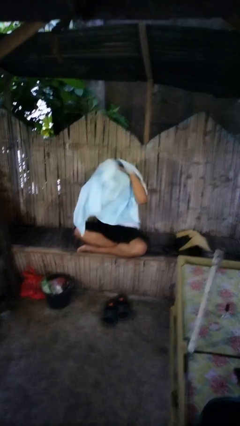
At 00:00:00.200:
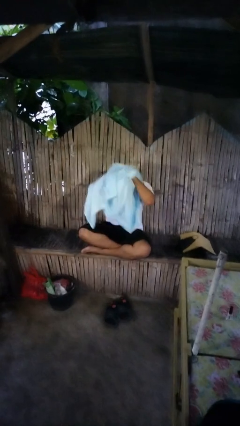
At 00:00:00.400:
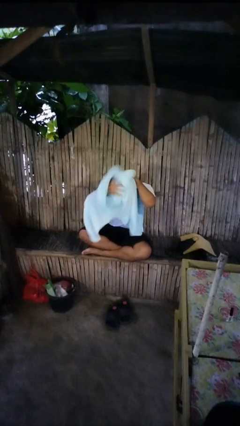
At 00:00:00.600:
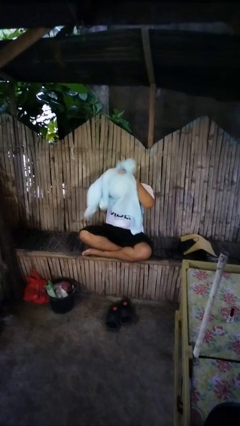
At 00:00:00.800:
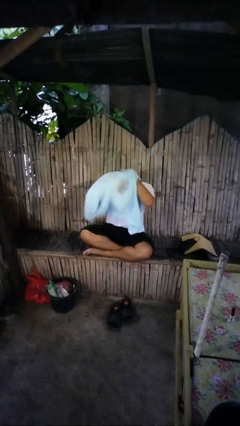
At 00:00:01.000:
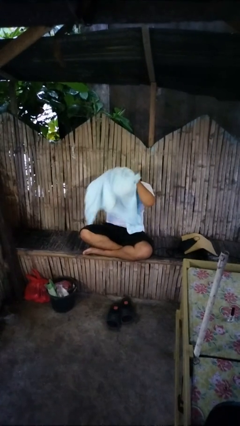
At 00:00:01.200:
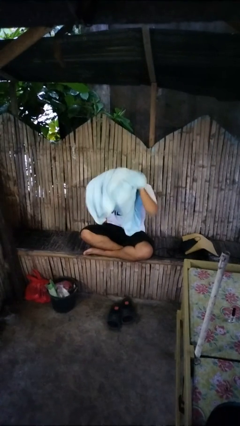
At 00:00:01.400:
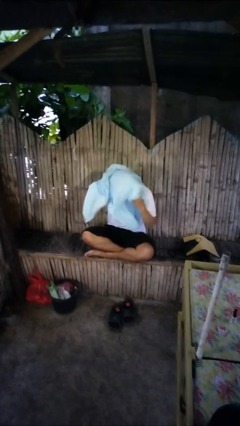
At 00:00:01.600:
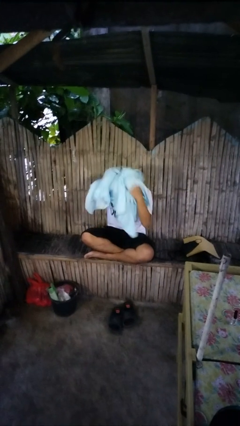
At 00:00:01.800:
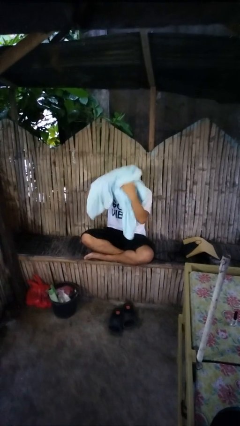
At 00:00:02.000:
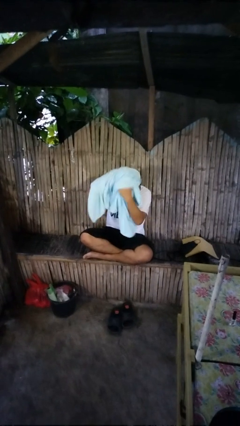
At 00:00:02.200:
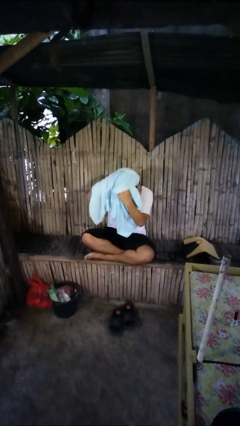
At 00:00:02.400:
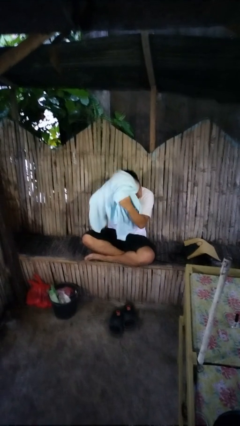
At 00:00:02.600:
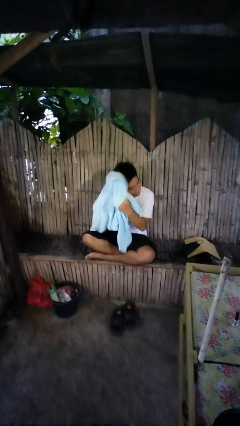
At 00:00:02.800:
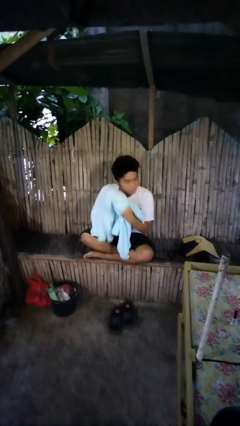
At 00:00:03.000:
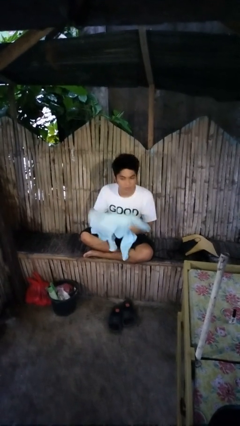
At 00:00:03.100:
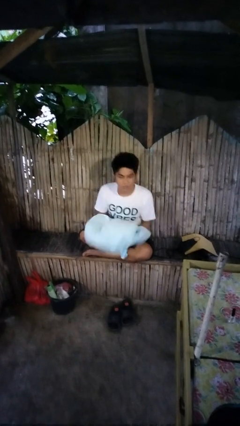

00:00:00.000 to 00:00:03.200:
person dries hair with towel

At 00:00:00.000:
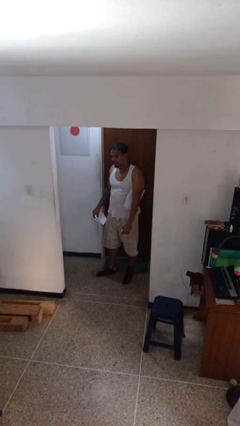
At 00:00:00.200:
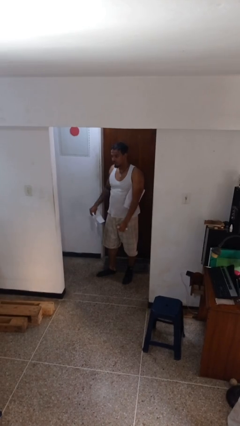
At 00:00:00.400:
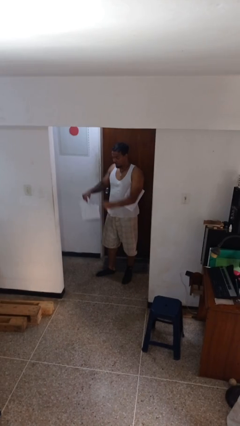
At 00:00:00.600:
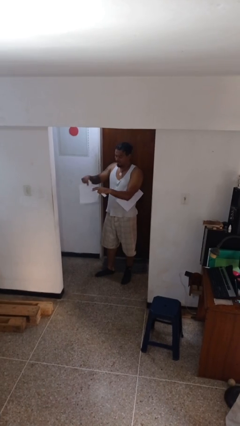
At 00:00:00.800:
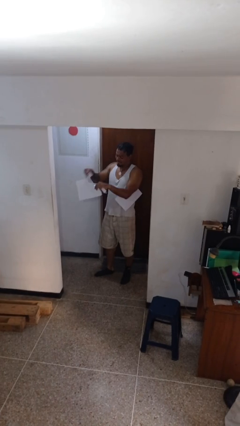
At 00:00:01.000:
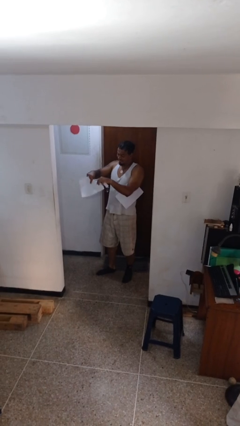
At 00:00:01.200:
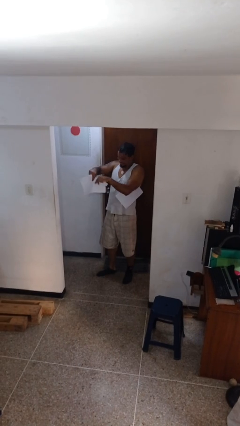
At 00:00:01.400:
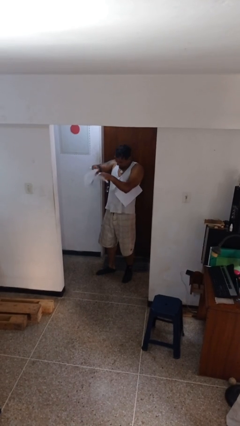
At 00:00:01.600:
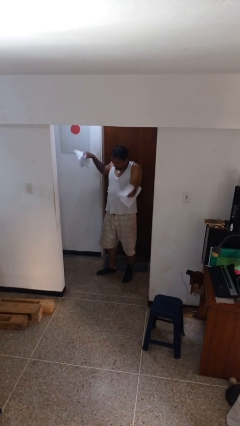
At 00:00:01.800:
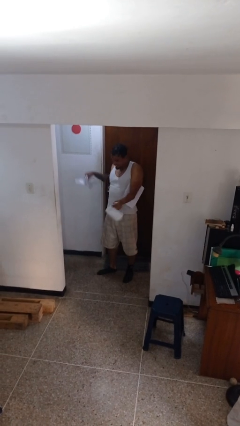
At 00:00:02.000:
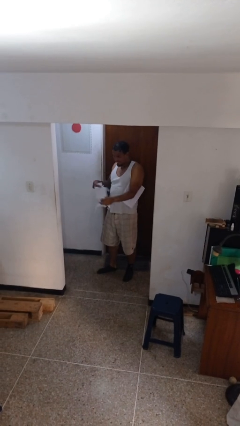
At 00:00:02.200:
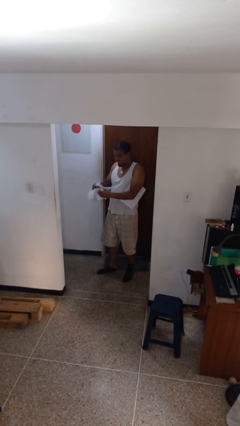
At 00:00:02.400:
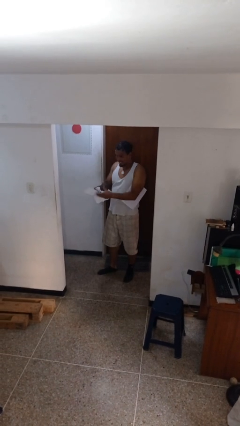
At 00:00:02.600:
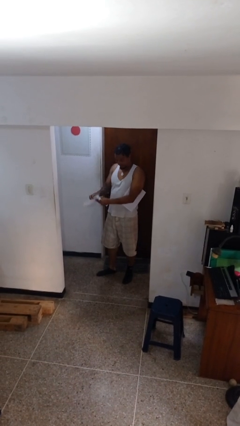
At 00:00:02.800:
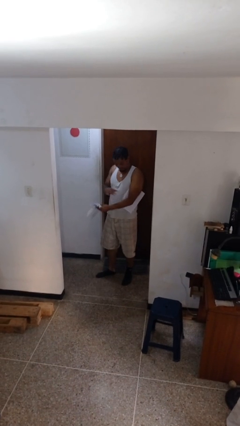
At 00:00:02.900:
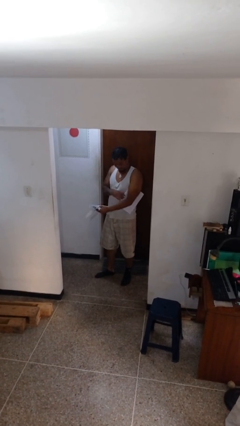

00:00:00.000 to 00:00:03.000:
person tears paper

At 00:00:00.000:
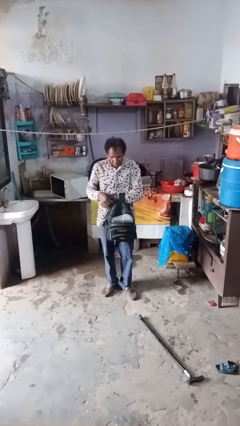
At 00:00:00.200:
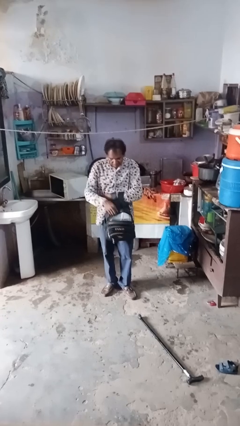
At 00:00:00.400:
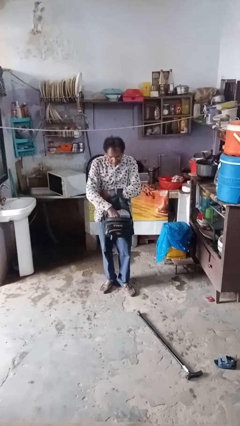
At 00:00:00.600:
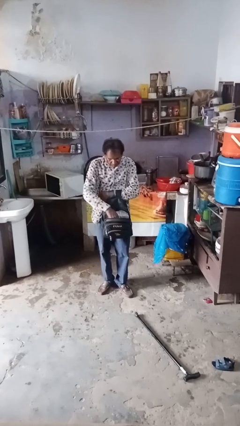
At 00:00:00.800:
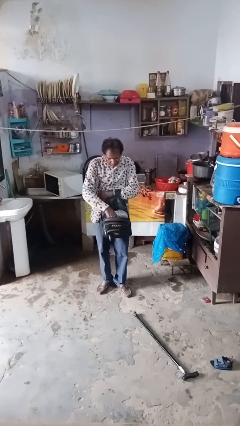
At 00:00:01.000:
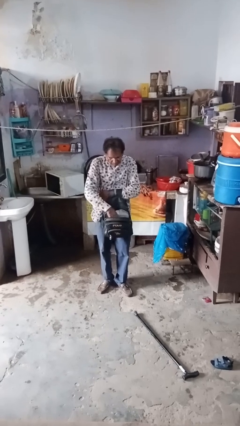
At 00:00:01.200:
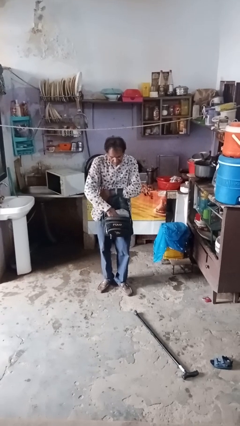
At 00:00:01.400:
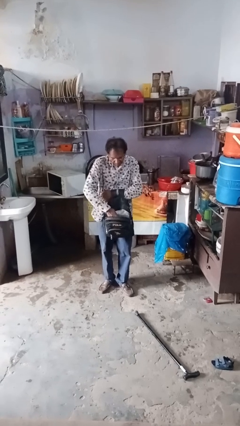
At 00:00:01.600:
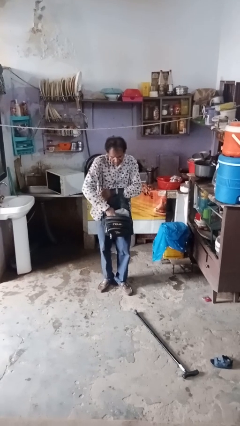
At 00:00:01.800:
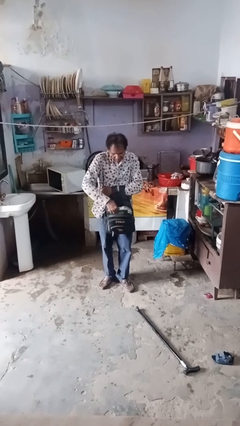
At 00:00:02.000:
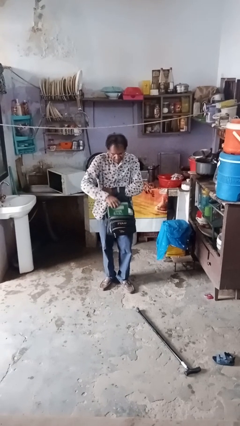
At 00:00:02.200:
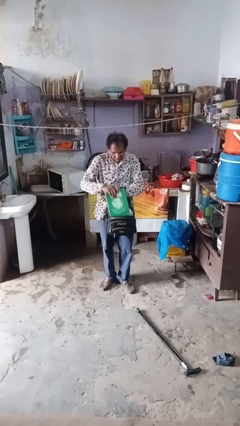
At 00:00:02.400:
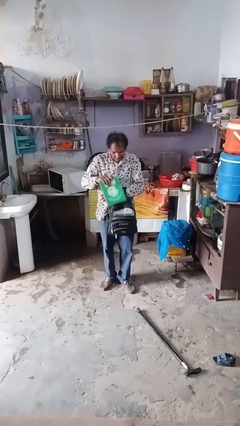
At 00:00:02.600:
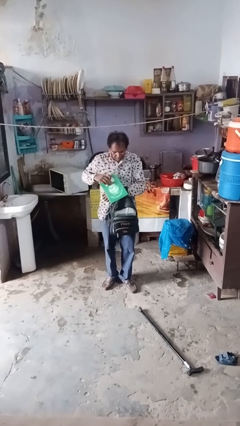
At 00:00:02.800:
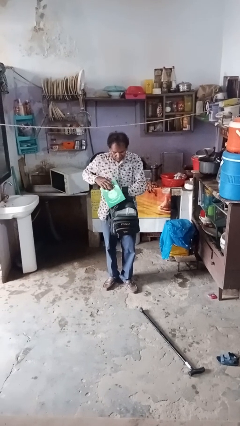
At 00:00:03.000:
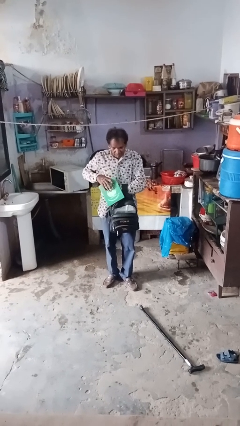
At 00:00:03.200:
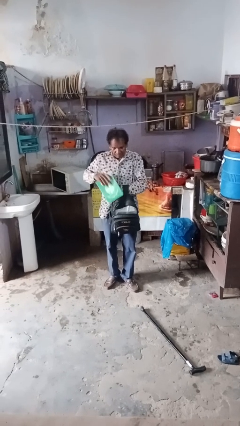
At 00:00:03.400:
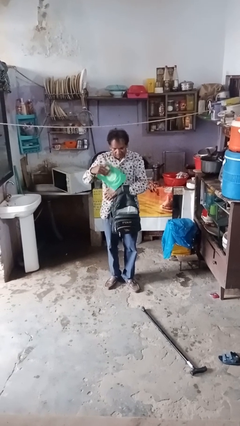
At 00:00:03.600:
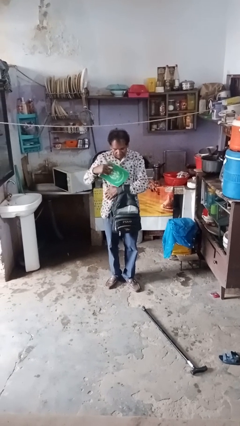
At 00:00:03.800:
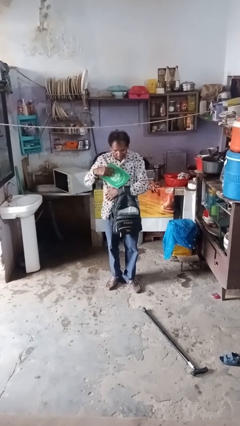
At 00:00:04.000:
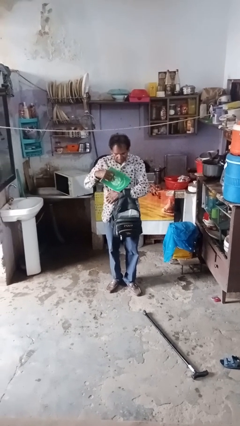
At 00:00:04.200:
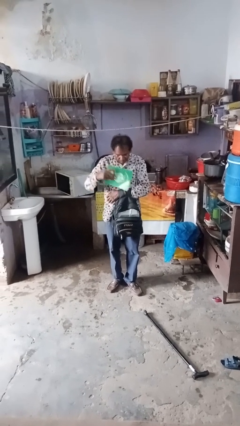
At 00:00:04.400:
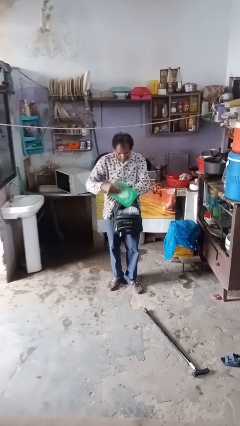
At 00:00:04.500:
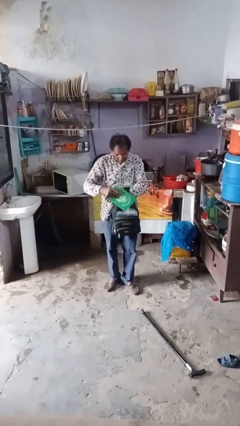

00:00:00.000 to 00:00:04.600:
person takes object from bag

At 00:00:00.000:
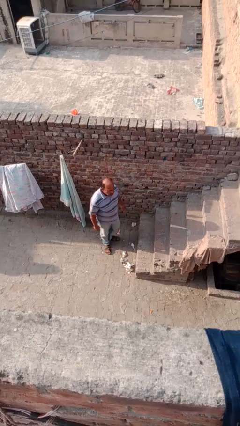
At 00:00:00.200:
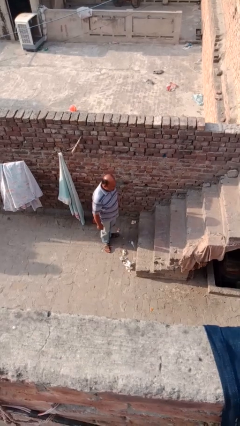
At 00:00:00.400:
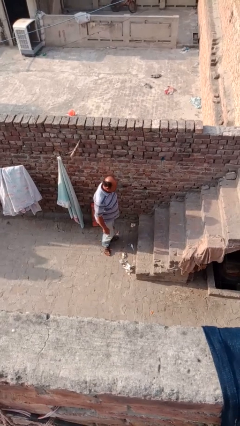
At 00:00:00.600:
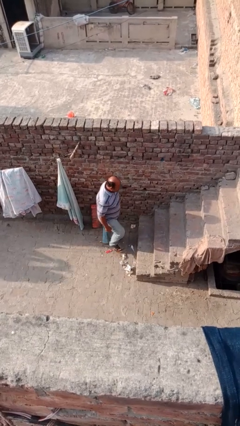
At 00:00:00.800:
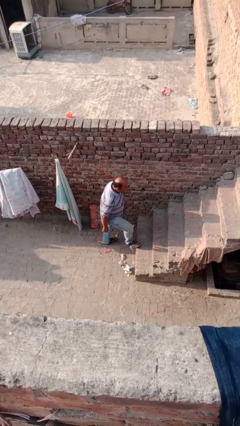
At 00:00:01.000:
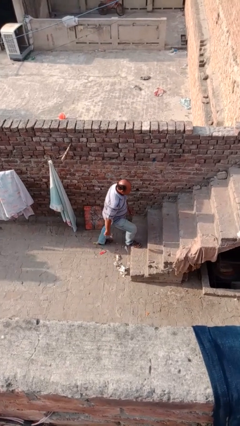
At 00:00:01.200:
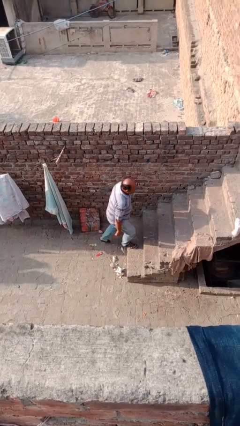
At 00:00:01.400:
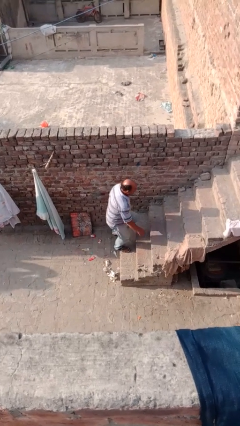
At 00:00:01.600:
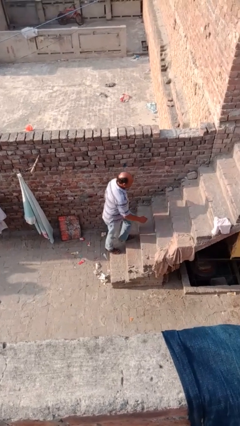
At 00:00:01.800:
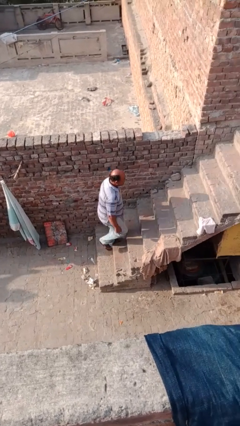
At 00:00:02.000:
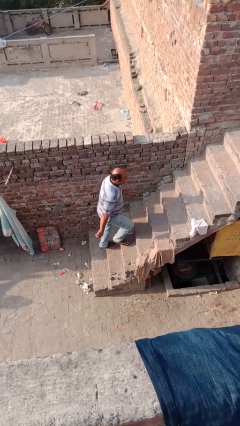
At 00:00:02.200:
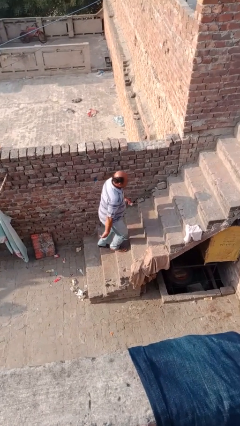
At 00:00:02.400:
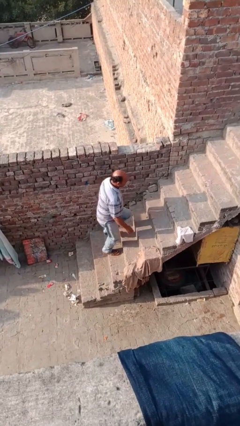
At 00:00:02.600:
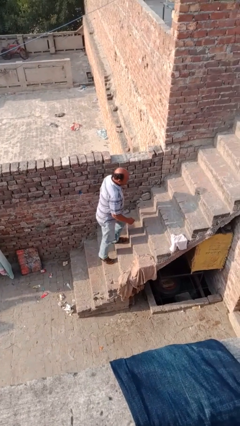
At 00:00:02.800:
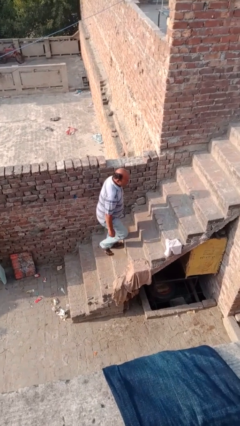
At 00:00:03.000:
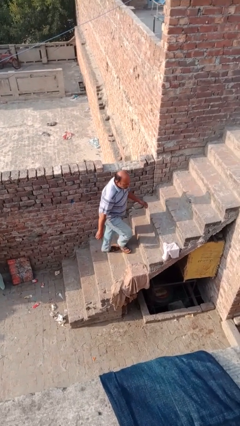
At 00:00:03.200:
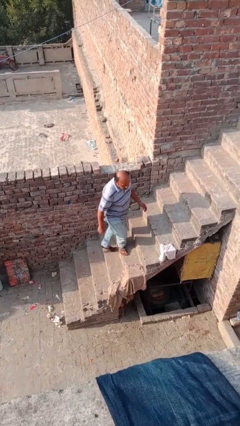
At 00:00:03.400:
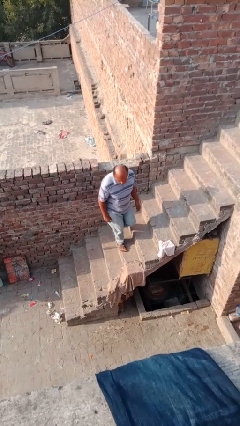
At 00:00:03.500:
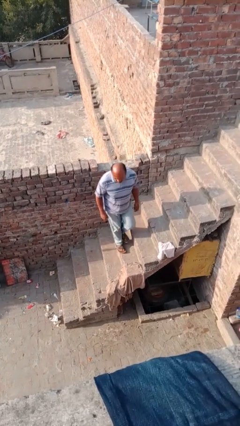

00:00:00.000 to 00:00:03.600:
person climbs up stairs

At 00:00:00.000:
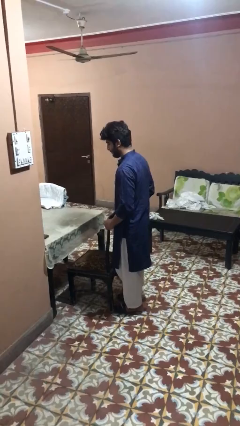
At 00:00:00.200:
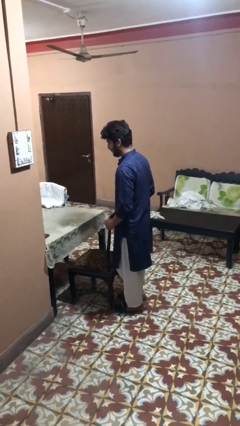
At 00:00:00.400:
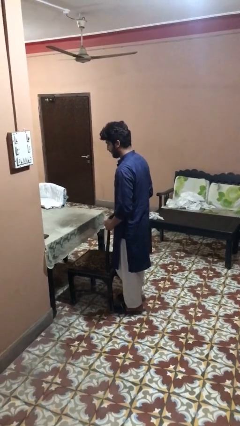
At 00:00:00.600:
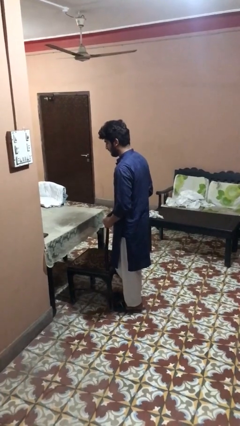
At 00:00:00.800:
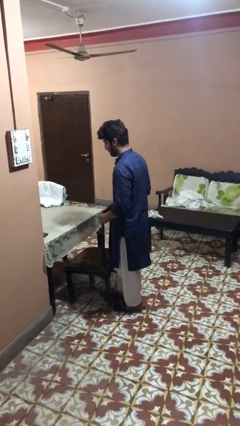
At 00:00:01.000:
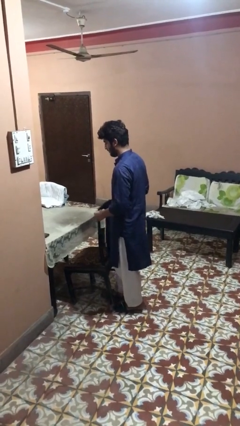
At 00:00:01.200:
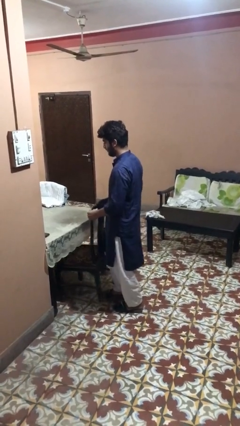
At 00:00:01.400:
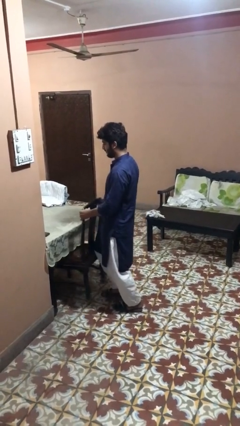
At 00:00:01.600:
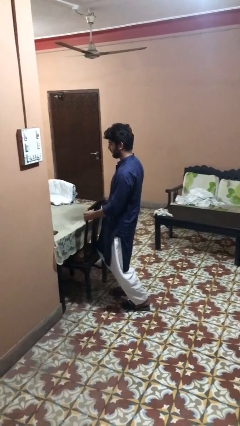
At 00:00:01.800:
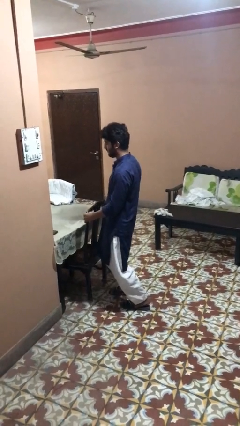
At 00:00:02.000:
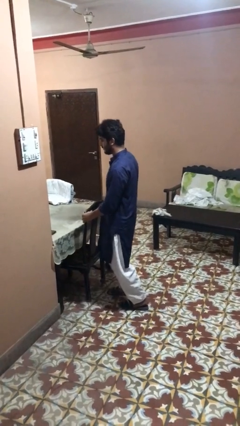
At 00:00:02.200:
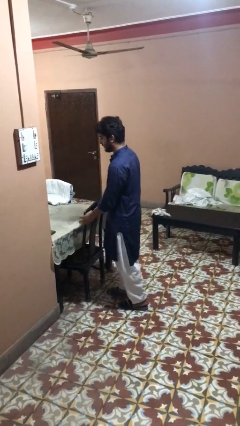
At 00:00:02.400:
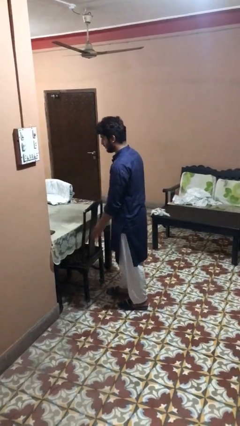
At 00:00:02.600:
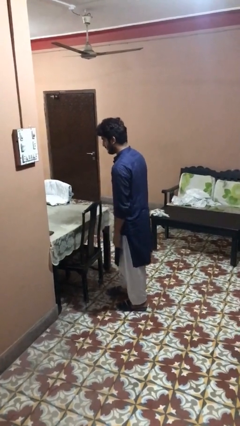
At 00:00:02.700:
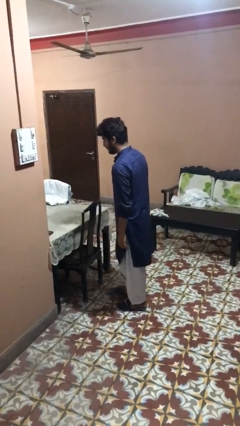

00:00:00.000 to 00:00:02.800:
person pushes in chair
